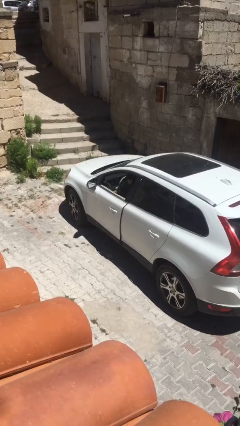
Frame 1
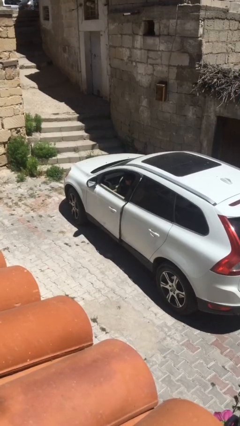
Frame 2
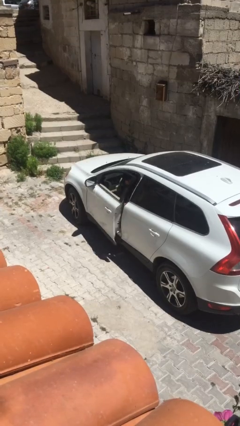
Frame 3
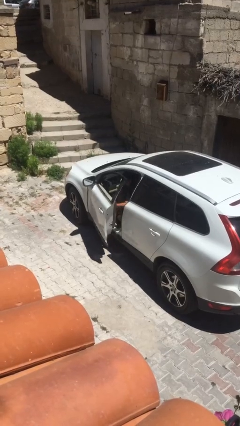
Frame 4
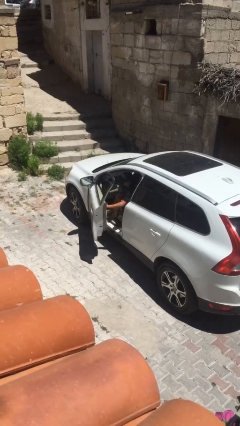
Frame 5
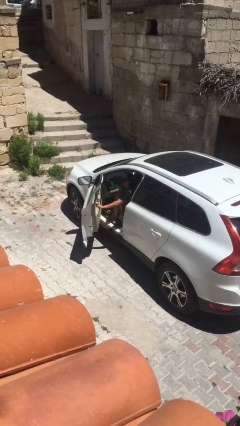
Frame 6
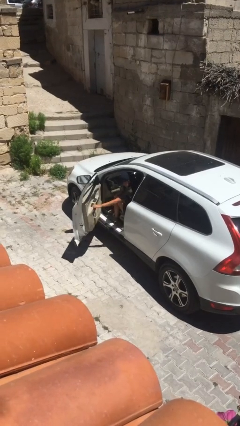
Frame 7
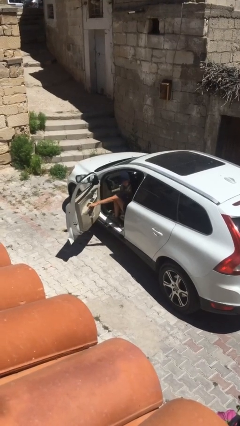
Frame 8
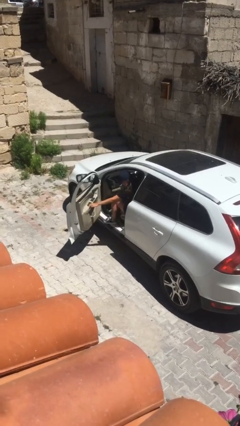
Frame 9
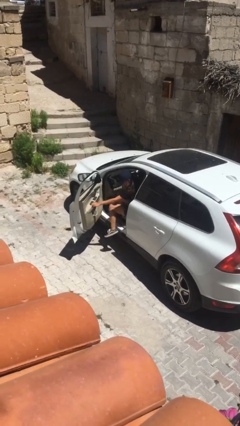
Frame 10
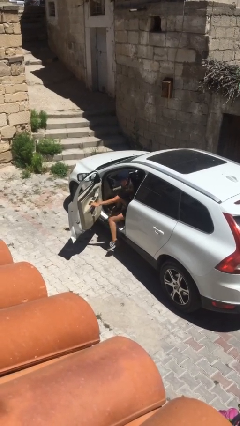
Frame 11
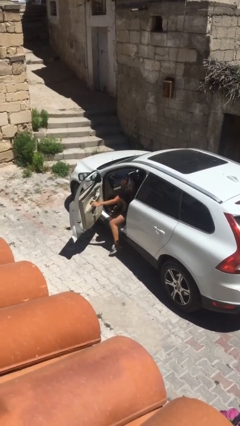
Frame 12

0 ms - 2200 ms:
person opens car door

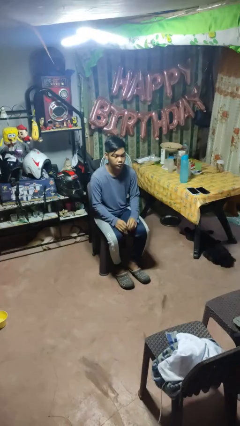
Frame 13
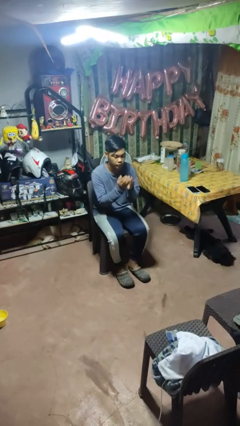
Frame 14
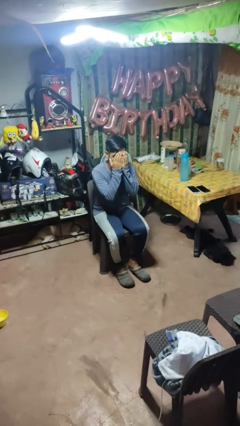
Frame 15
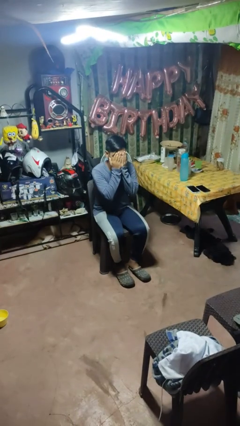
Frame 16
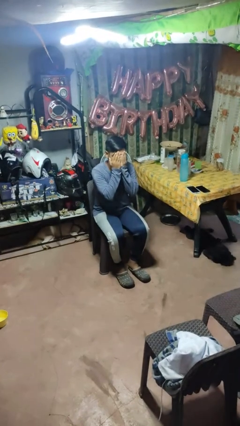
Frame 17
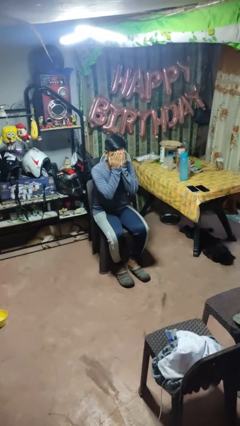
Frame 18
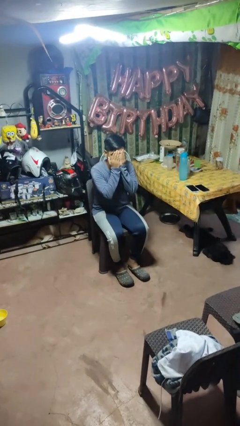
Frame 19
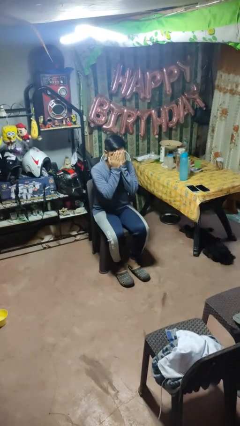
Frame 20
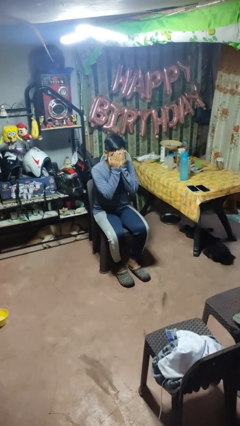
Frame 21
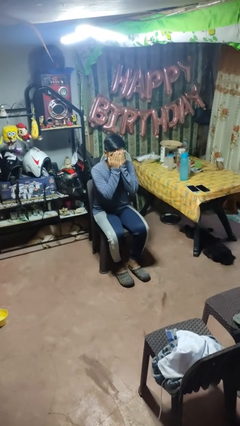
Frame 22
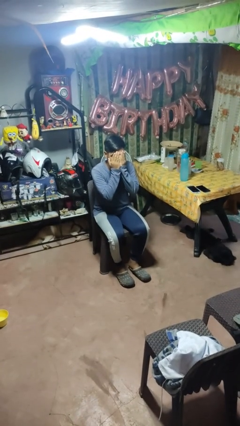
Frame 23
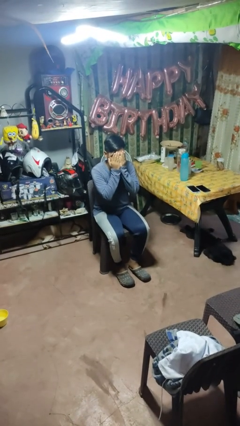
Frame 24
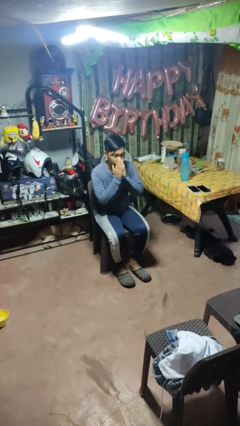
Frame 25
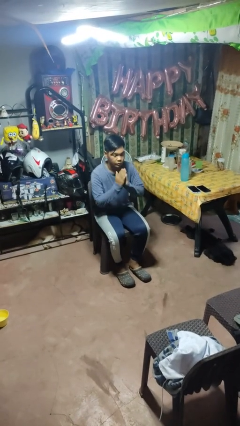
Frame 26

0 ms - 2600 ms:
person covers face with hands

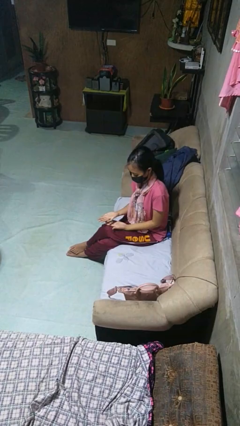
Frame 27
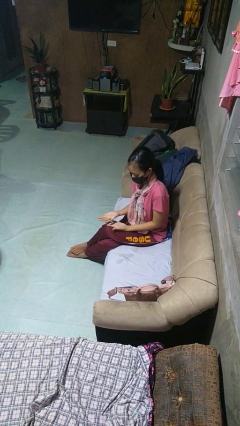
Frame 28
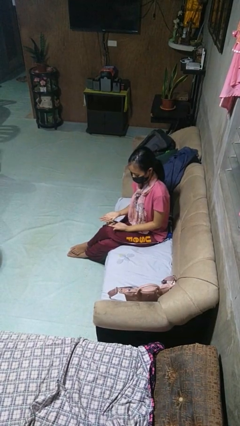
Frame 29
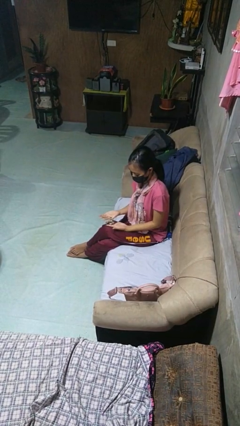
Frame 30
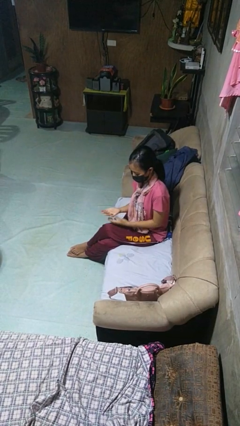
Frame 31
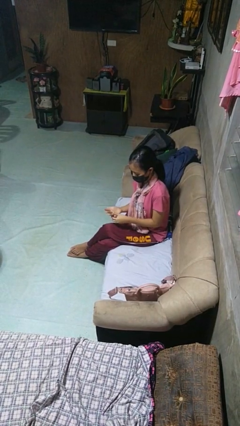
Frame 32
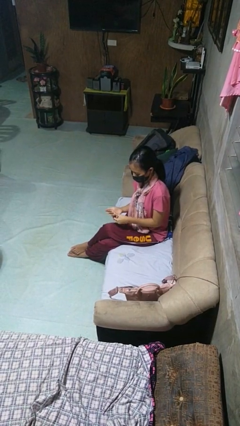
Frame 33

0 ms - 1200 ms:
person takes off ring

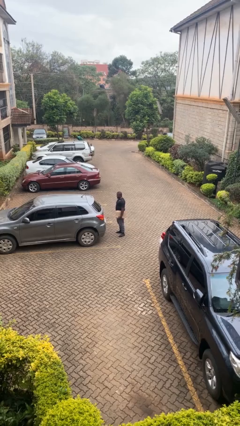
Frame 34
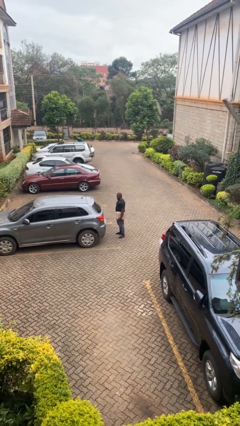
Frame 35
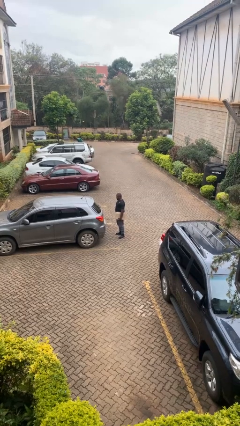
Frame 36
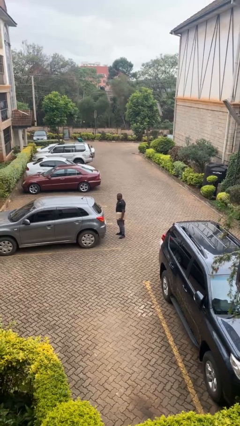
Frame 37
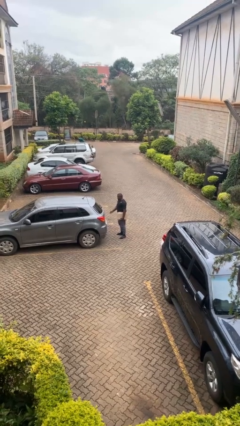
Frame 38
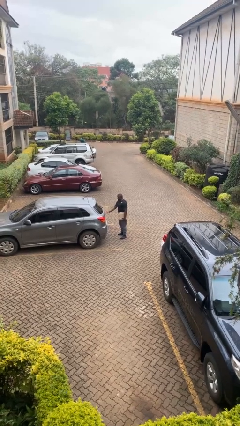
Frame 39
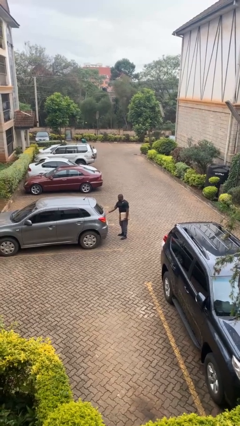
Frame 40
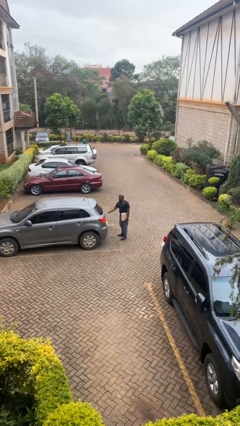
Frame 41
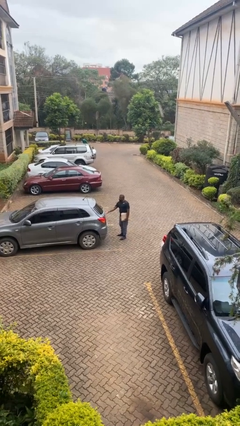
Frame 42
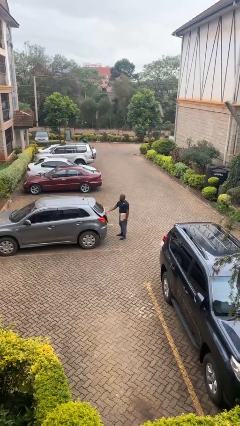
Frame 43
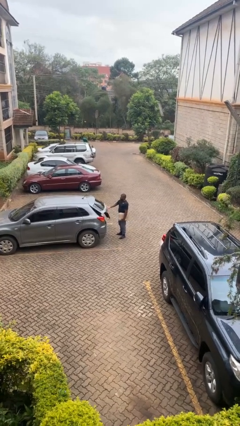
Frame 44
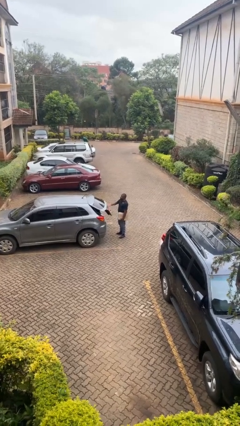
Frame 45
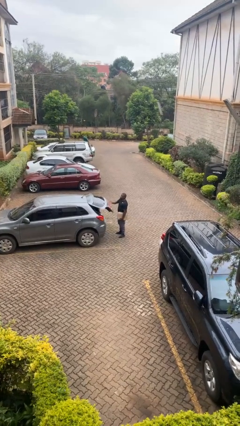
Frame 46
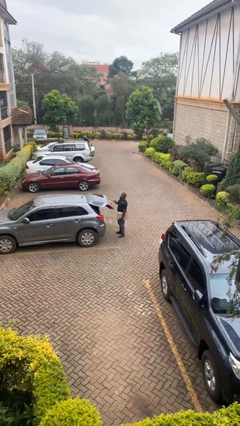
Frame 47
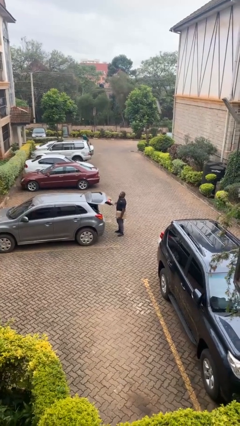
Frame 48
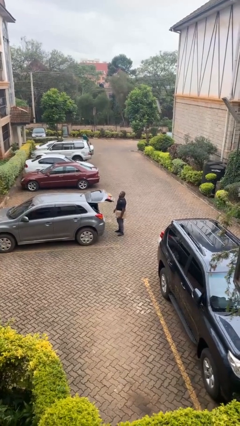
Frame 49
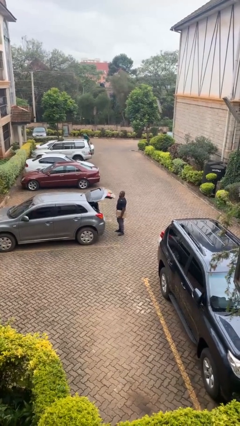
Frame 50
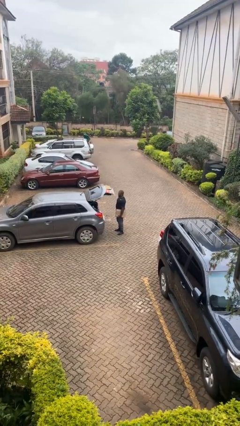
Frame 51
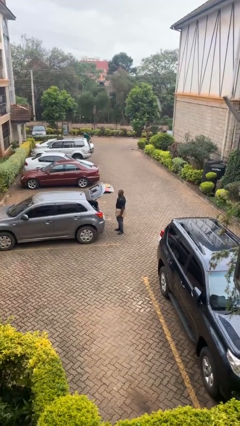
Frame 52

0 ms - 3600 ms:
person opens car trunk

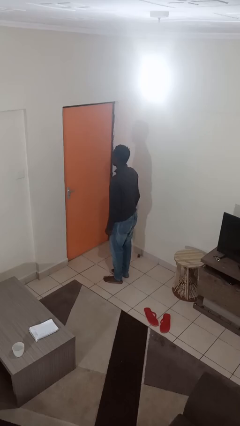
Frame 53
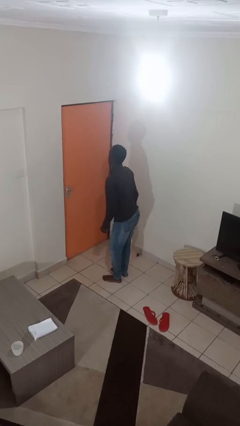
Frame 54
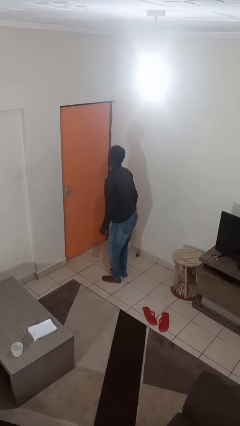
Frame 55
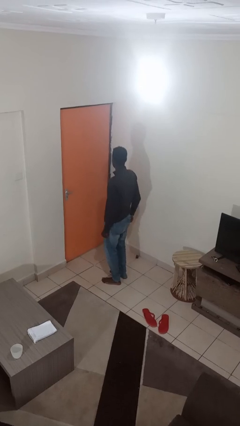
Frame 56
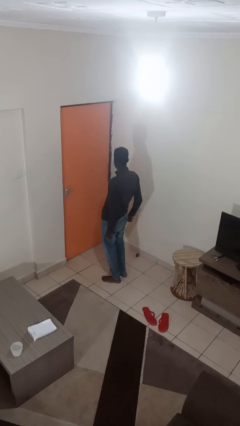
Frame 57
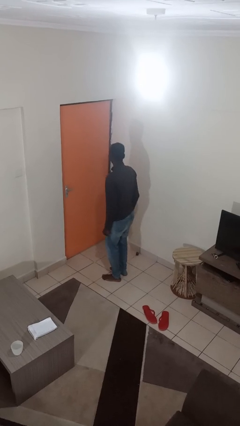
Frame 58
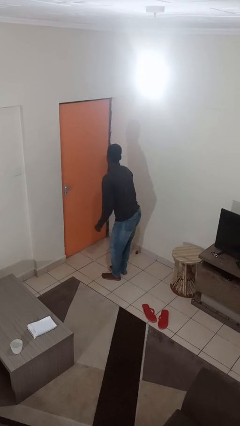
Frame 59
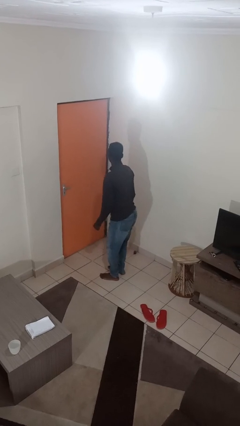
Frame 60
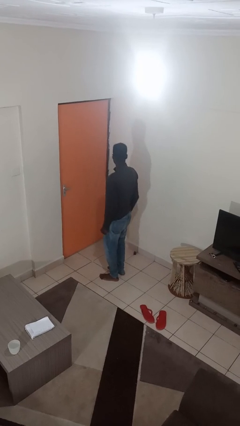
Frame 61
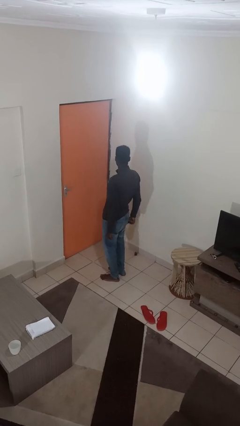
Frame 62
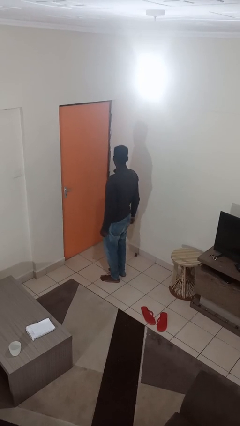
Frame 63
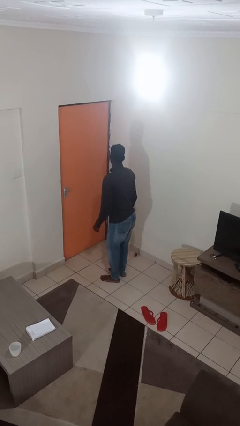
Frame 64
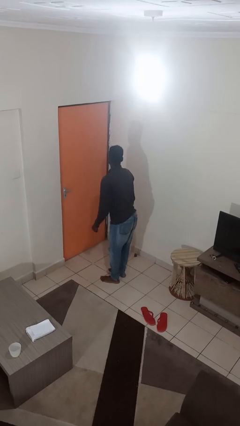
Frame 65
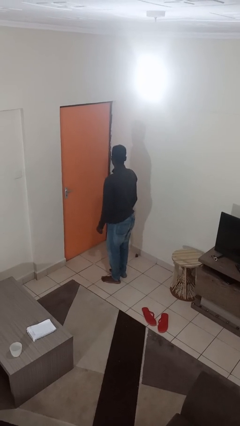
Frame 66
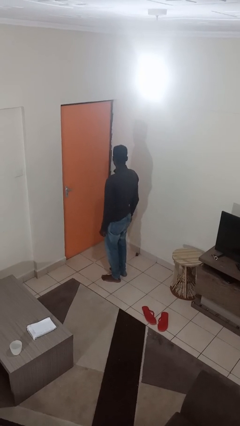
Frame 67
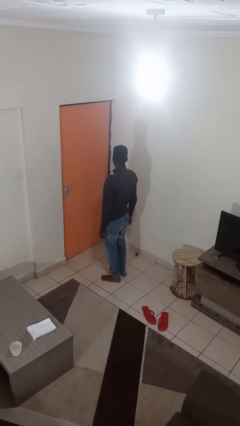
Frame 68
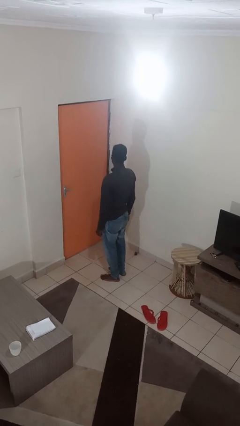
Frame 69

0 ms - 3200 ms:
person wiggles hips

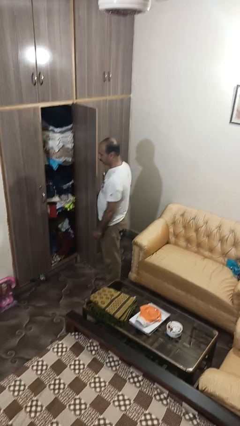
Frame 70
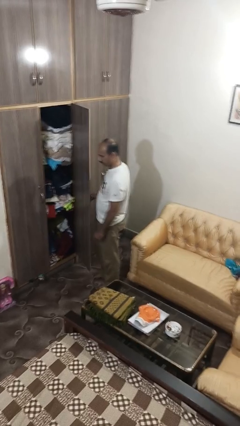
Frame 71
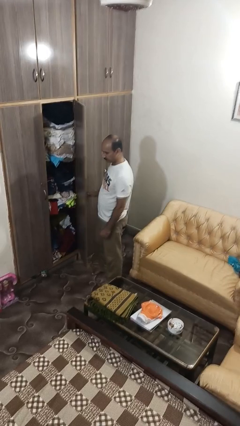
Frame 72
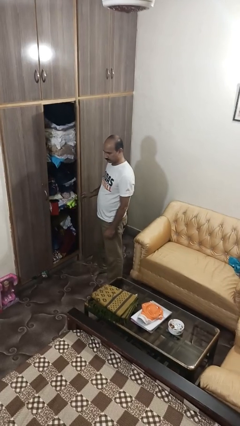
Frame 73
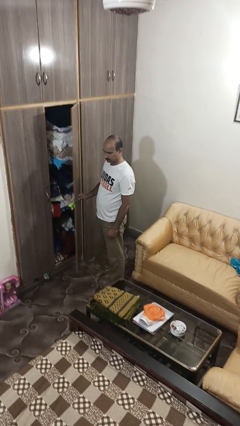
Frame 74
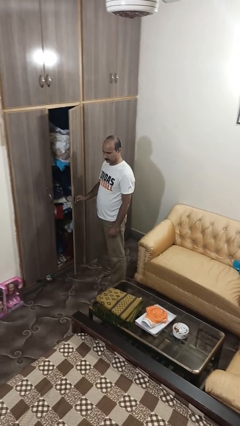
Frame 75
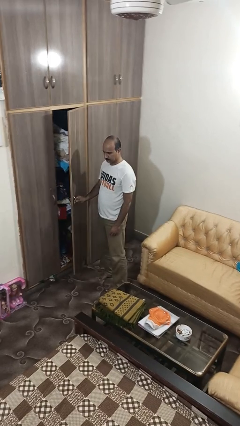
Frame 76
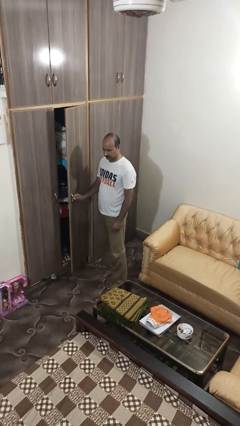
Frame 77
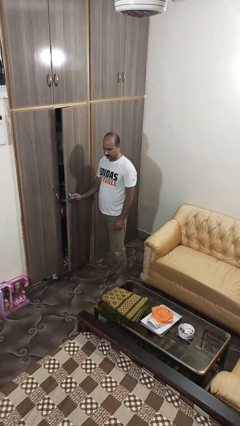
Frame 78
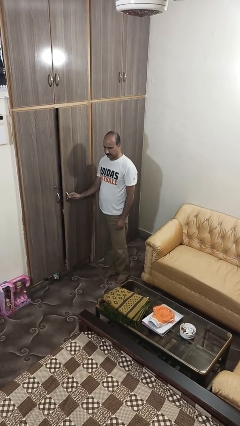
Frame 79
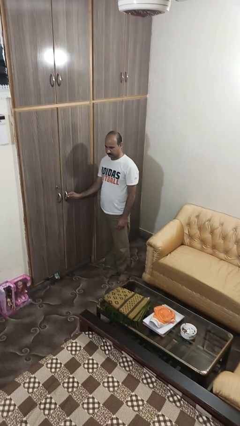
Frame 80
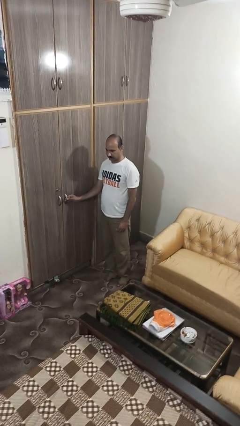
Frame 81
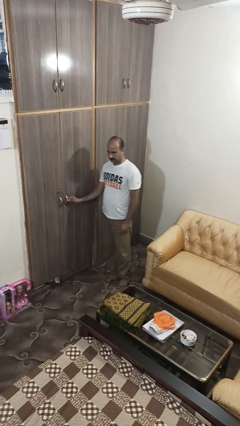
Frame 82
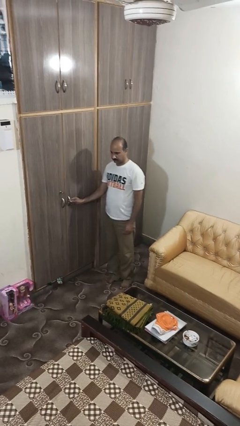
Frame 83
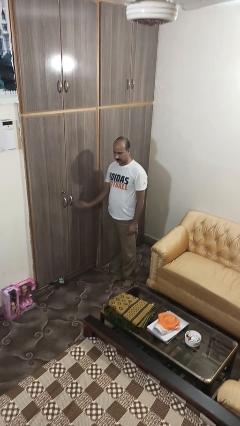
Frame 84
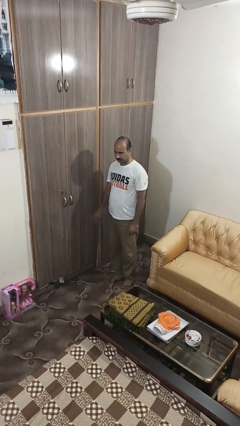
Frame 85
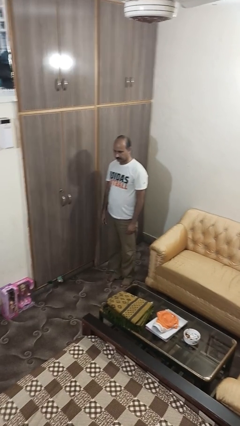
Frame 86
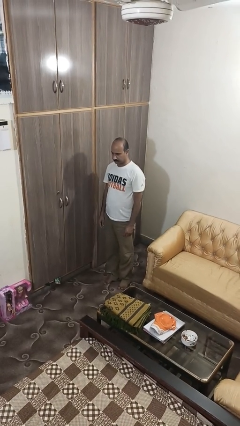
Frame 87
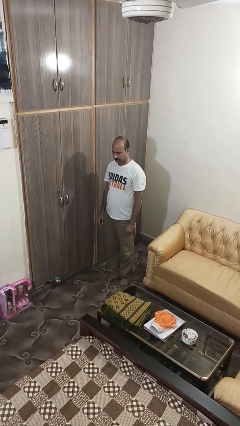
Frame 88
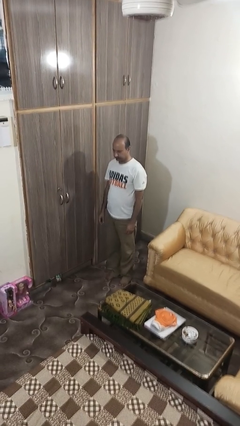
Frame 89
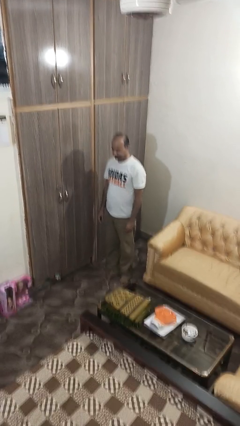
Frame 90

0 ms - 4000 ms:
person closes closet door

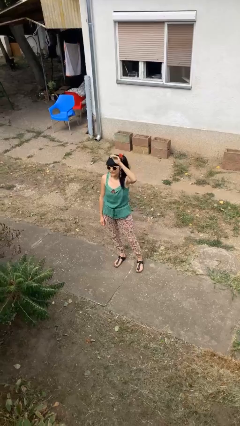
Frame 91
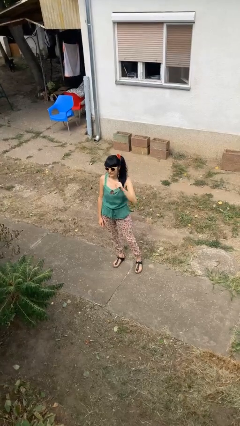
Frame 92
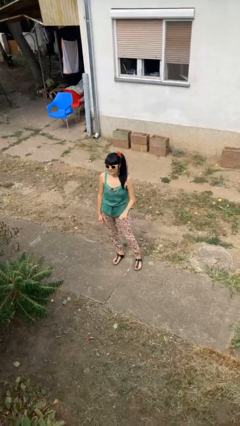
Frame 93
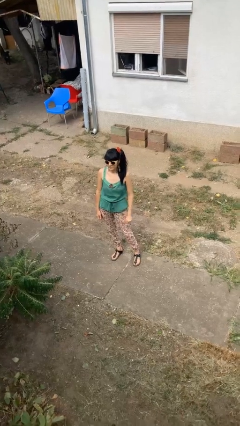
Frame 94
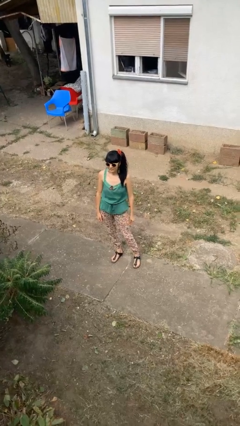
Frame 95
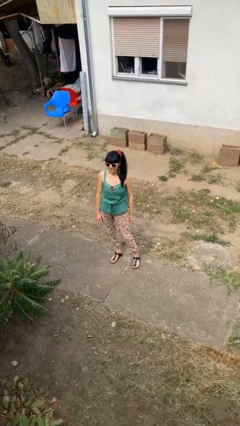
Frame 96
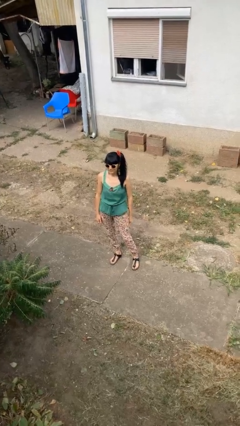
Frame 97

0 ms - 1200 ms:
person gestures lower hand
